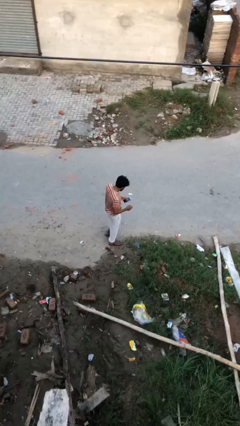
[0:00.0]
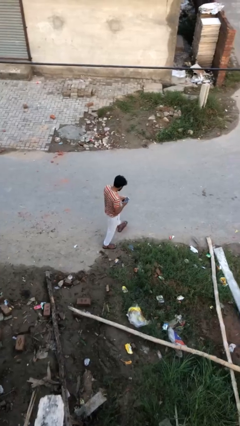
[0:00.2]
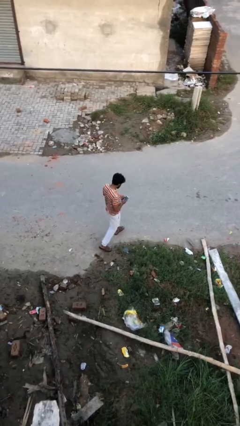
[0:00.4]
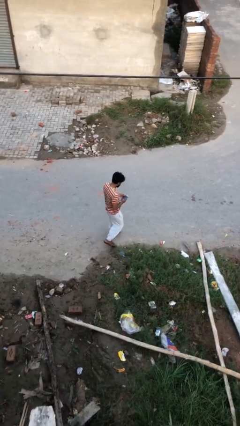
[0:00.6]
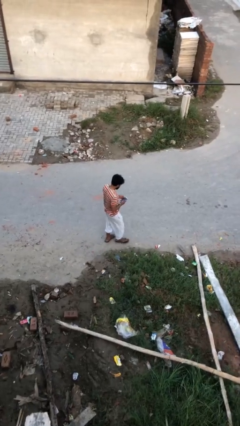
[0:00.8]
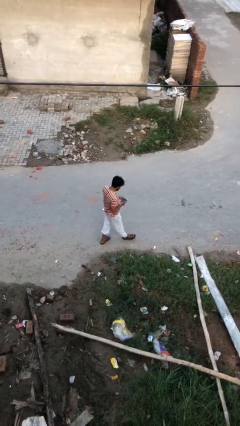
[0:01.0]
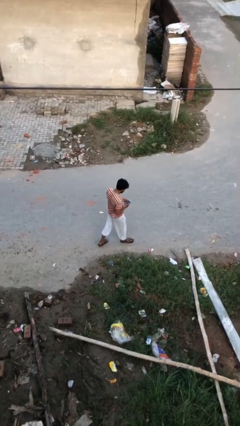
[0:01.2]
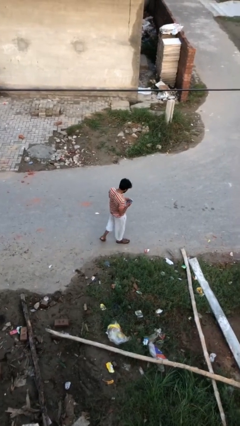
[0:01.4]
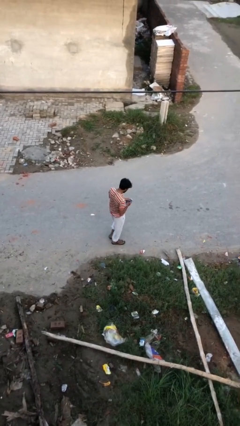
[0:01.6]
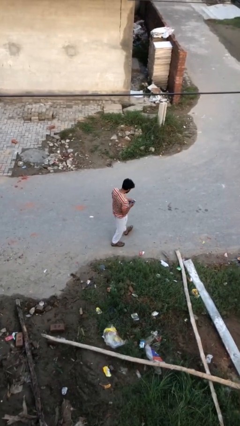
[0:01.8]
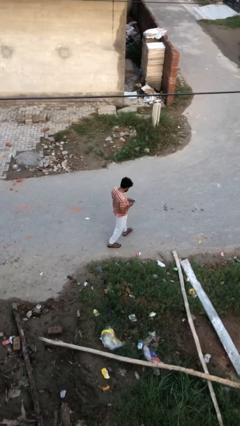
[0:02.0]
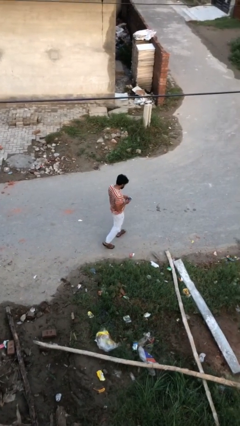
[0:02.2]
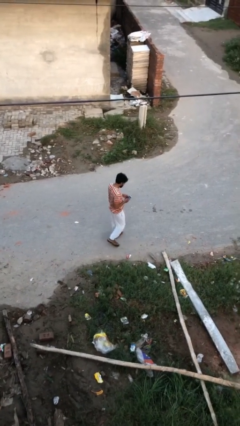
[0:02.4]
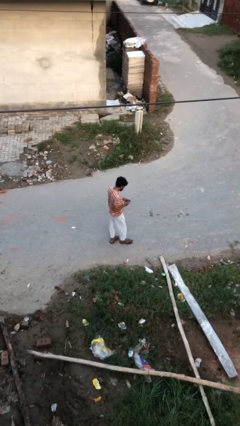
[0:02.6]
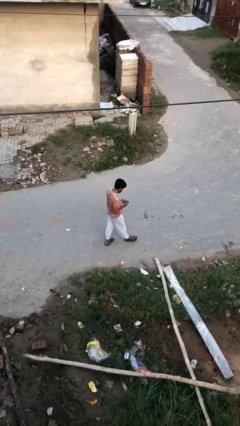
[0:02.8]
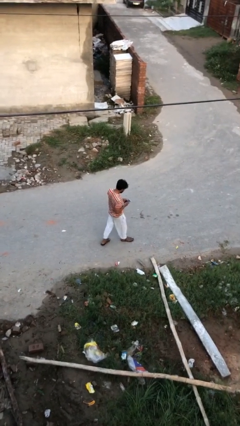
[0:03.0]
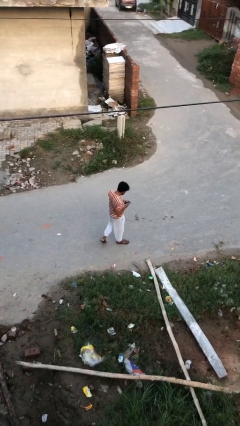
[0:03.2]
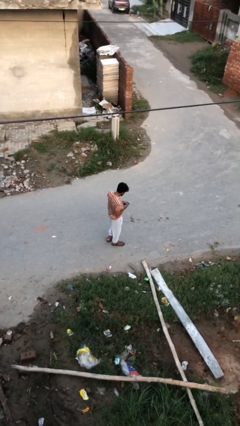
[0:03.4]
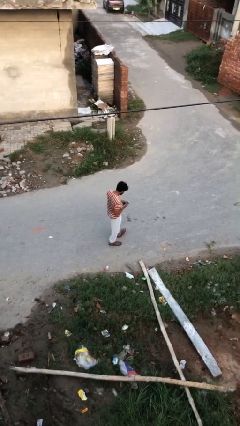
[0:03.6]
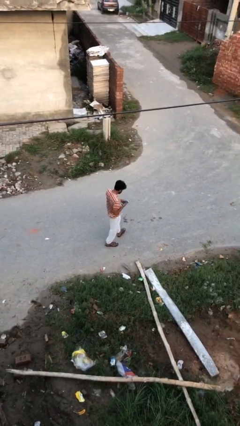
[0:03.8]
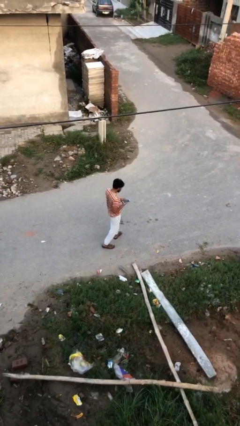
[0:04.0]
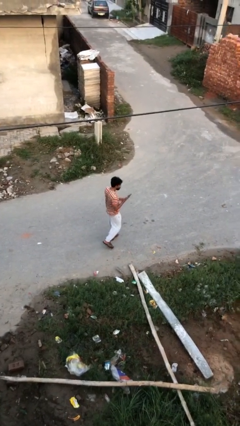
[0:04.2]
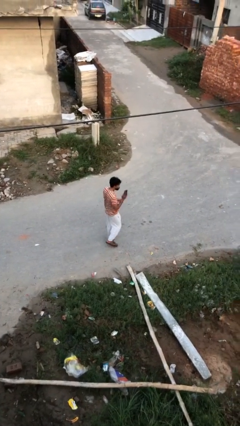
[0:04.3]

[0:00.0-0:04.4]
person texts on phone

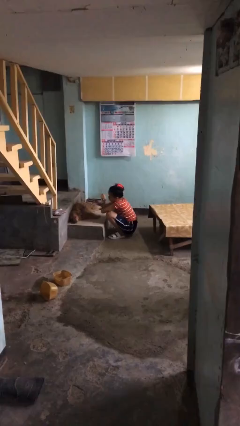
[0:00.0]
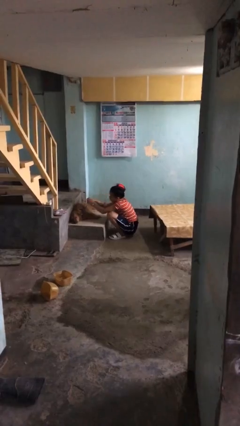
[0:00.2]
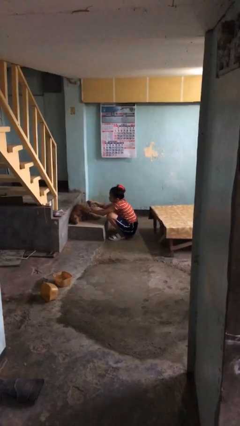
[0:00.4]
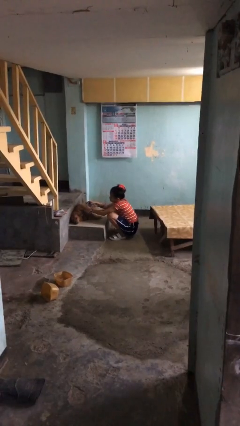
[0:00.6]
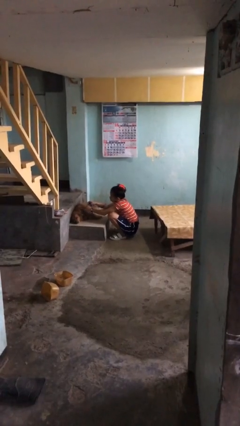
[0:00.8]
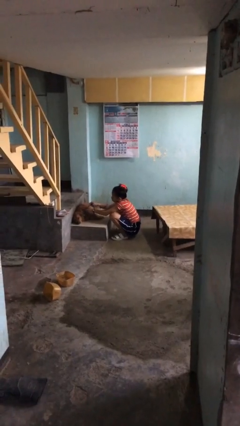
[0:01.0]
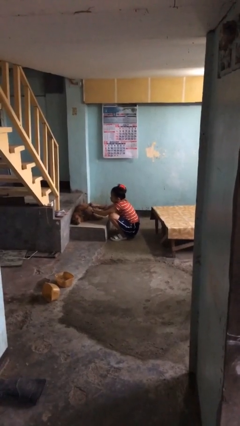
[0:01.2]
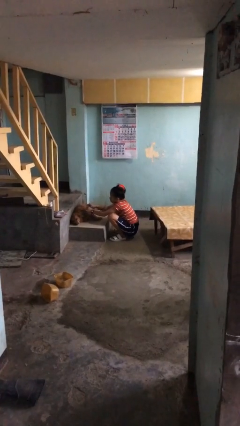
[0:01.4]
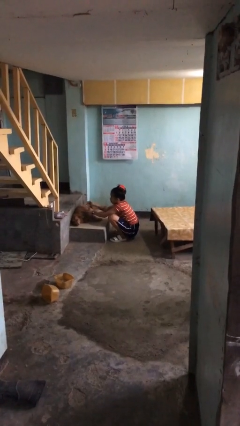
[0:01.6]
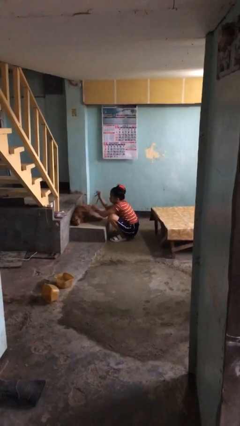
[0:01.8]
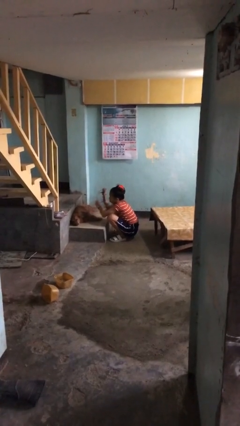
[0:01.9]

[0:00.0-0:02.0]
person unattaches leash from dog

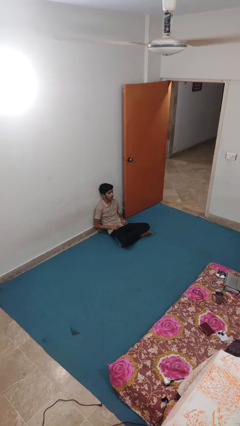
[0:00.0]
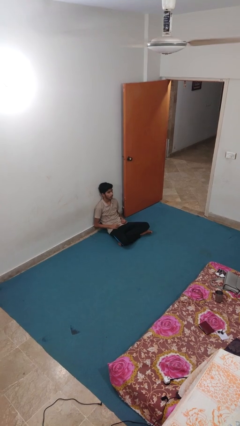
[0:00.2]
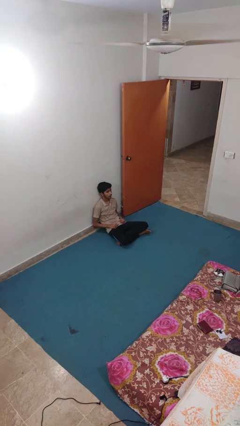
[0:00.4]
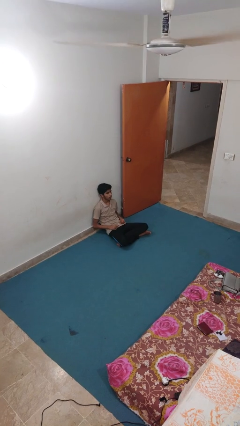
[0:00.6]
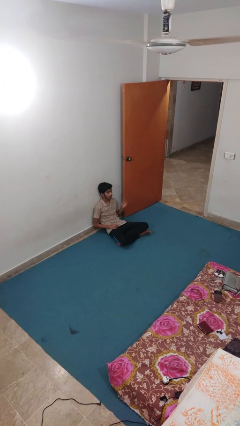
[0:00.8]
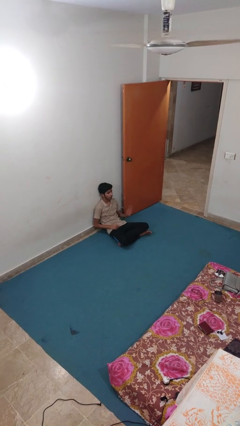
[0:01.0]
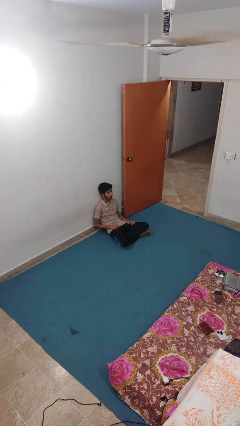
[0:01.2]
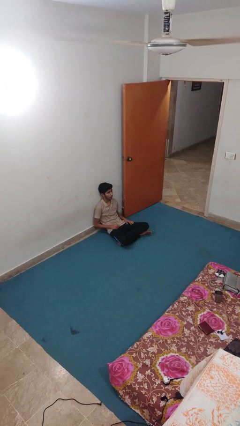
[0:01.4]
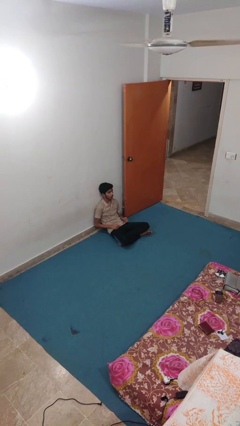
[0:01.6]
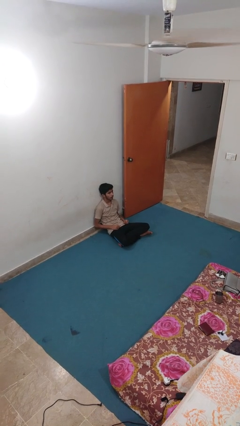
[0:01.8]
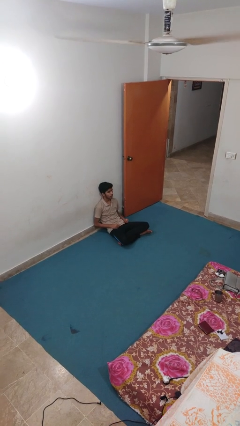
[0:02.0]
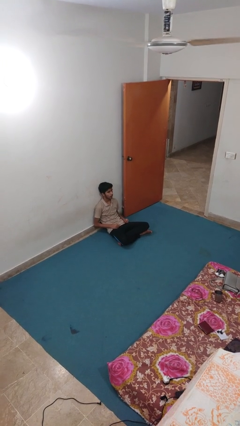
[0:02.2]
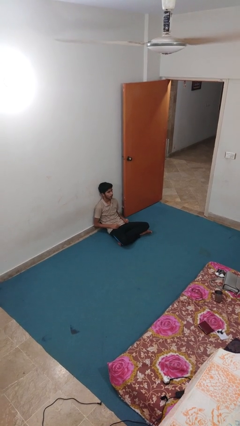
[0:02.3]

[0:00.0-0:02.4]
person slaps hands on thighs

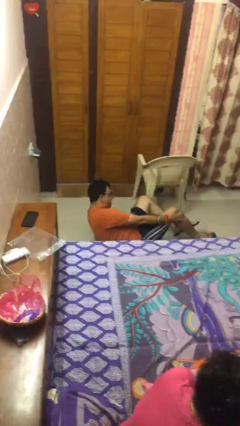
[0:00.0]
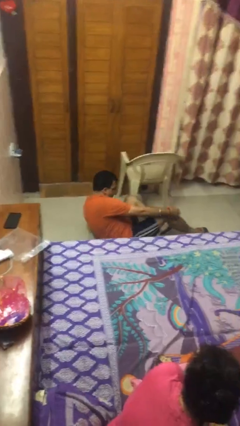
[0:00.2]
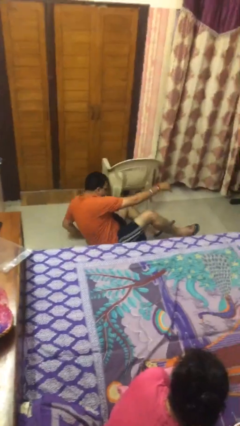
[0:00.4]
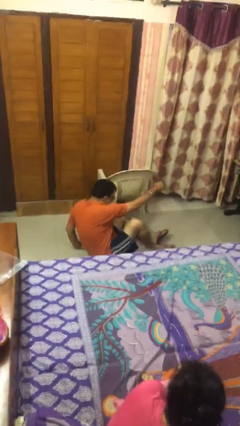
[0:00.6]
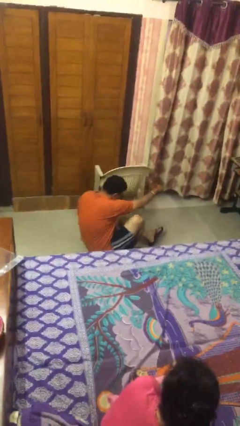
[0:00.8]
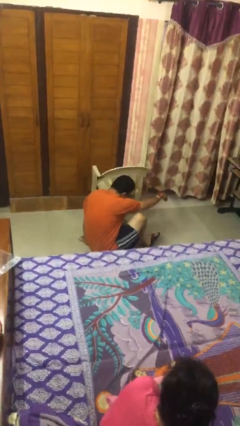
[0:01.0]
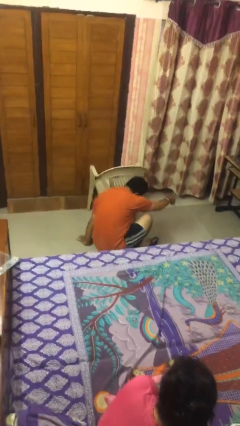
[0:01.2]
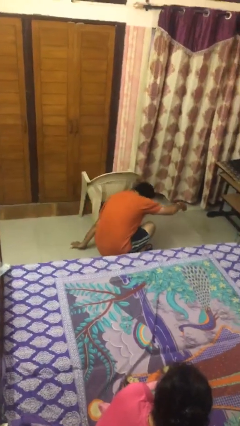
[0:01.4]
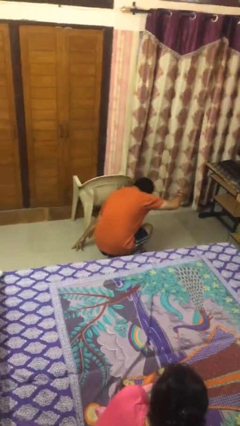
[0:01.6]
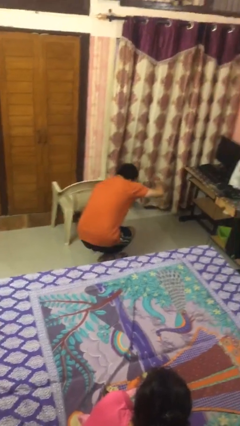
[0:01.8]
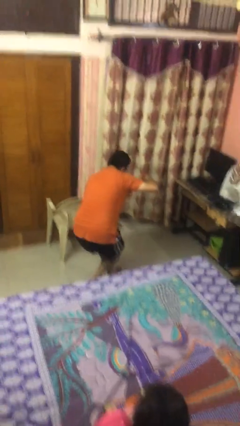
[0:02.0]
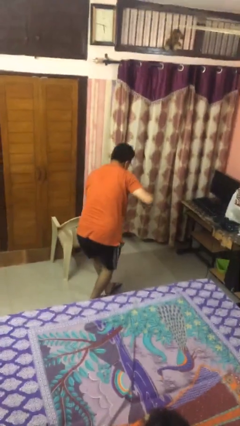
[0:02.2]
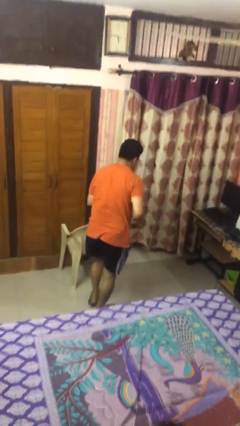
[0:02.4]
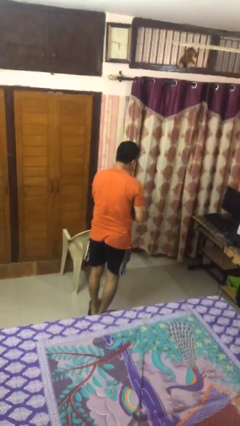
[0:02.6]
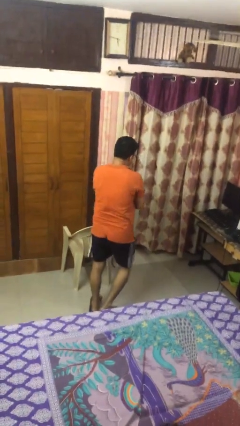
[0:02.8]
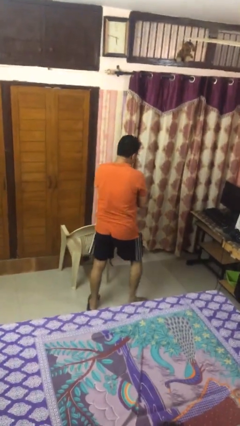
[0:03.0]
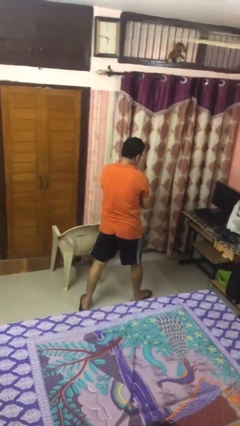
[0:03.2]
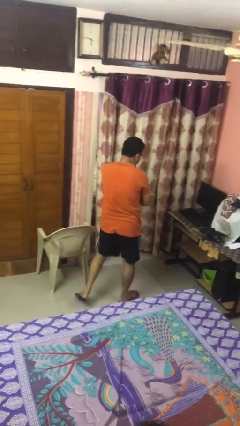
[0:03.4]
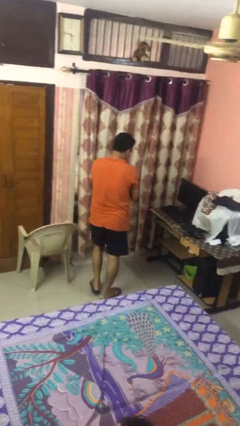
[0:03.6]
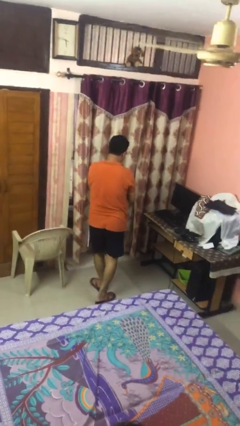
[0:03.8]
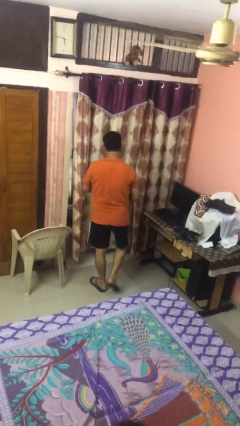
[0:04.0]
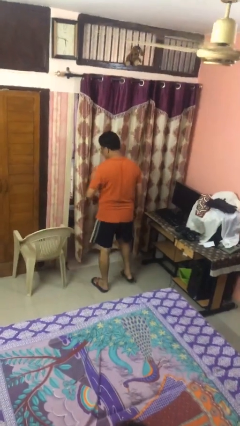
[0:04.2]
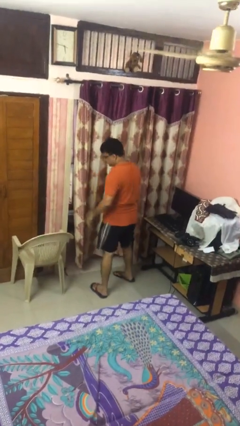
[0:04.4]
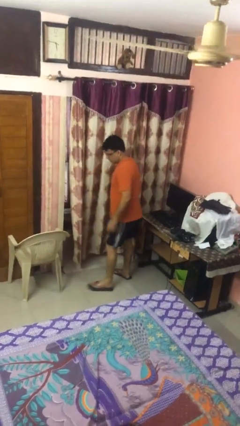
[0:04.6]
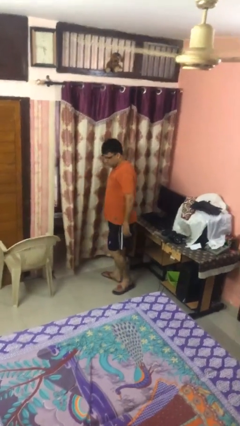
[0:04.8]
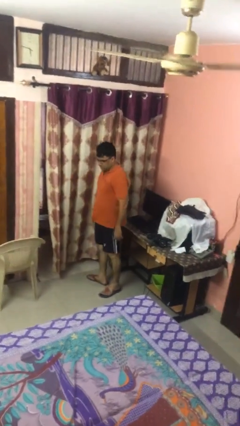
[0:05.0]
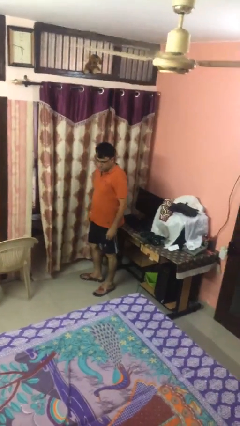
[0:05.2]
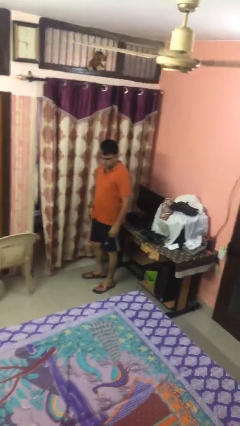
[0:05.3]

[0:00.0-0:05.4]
person stands up from floor

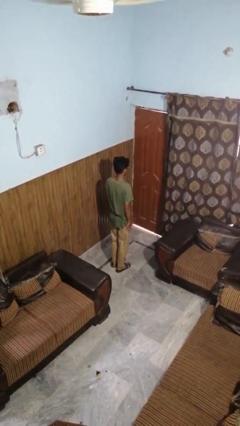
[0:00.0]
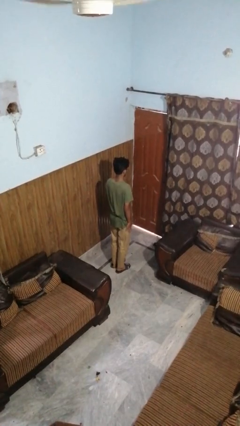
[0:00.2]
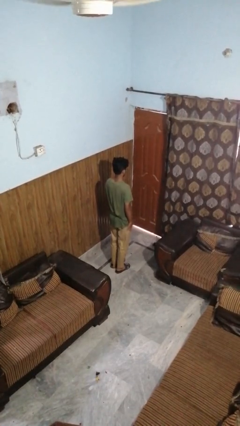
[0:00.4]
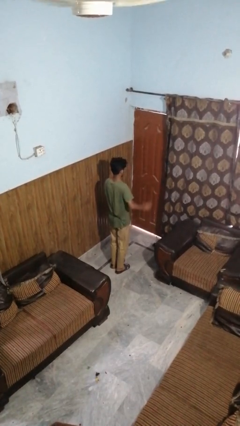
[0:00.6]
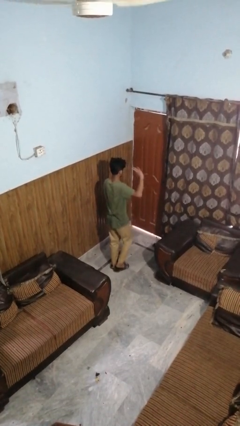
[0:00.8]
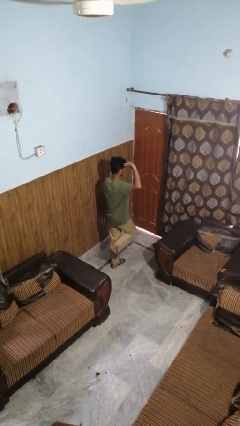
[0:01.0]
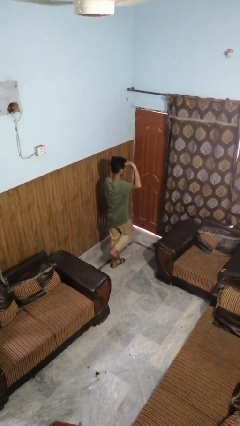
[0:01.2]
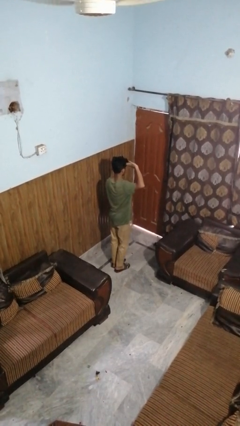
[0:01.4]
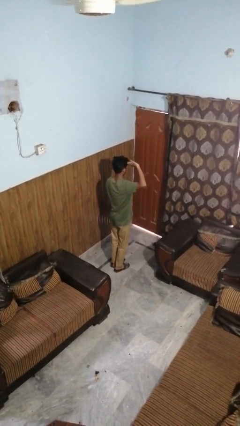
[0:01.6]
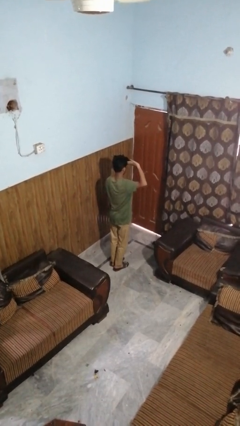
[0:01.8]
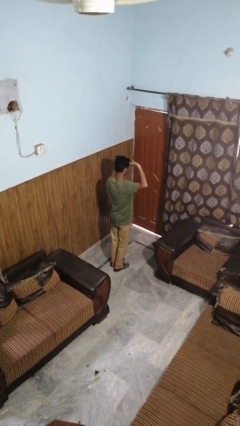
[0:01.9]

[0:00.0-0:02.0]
person salutes

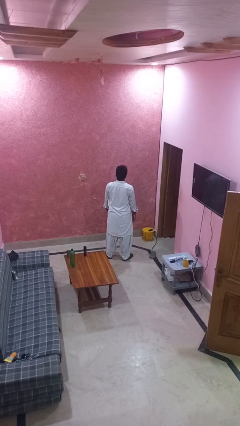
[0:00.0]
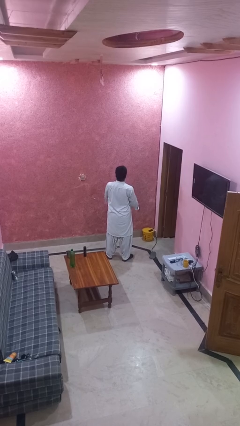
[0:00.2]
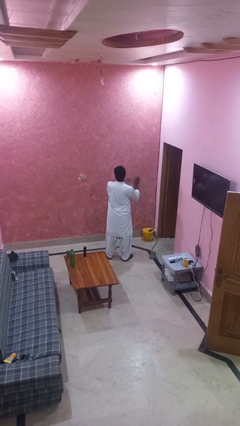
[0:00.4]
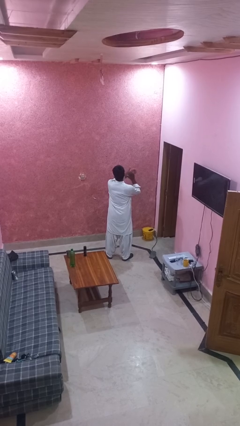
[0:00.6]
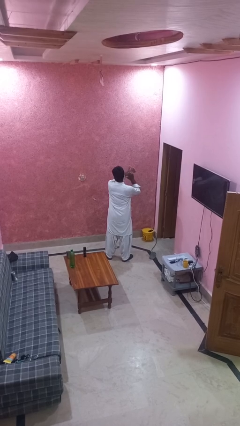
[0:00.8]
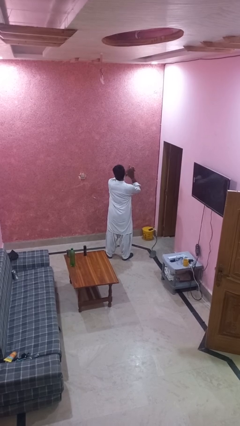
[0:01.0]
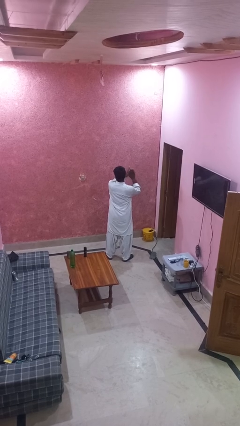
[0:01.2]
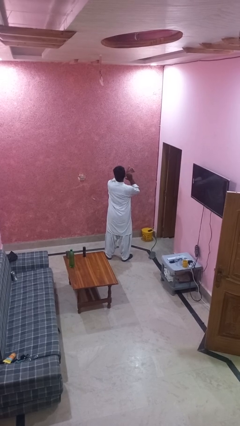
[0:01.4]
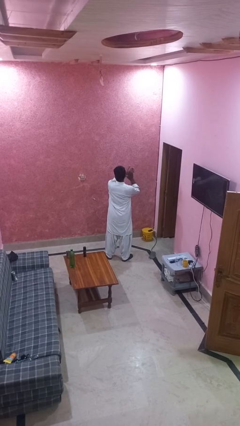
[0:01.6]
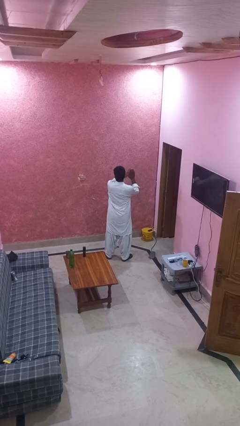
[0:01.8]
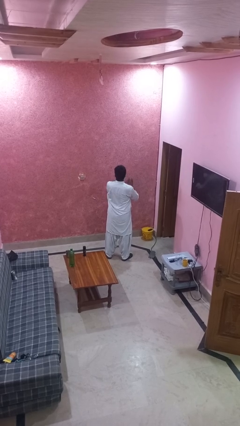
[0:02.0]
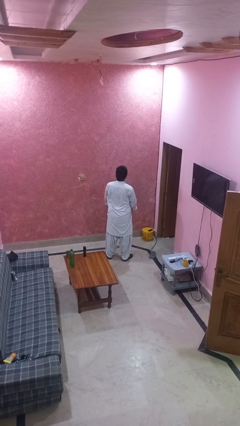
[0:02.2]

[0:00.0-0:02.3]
person claps hands
